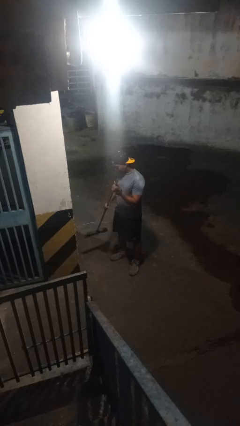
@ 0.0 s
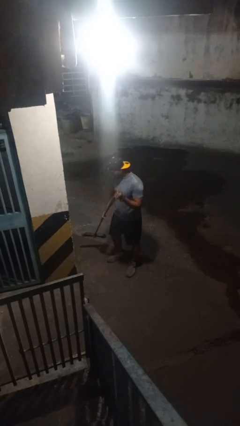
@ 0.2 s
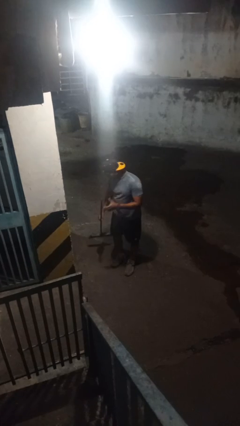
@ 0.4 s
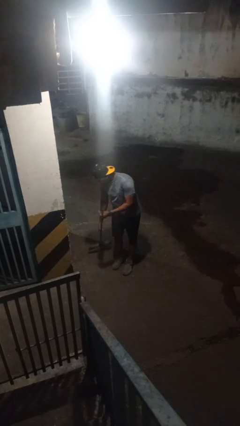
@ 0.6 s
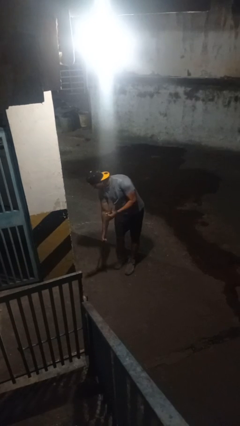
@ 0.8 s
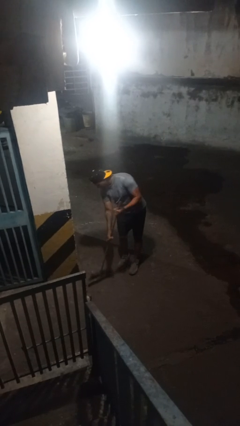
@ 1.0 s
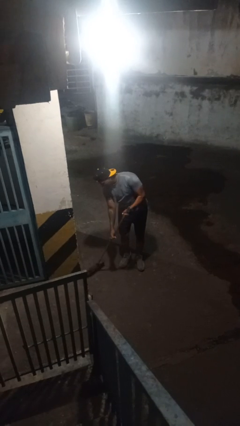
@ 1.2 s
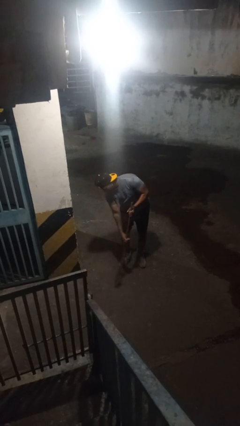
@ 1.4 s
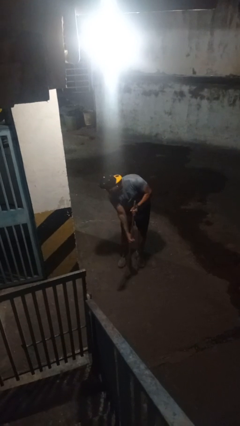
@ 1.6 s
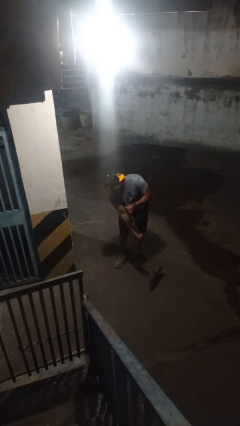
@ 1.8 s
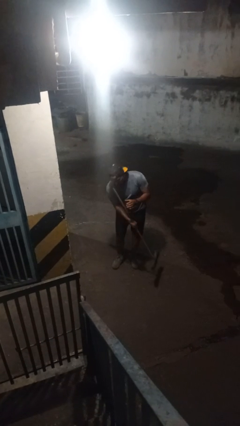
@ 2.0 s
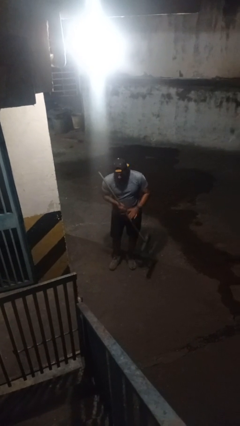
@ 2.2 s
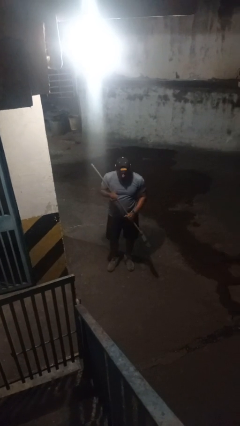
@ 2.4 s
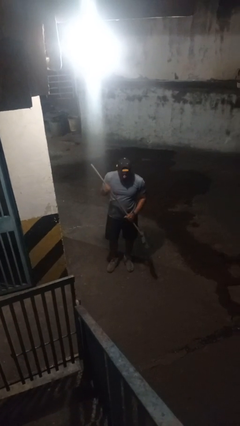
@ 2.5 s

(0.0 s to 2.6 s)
person sweeps floor

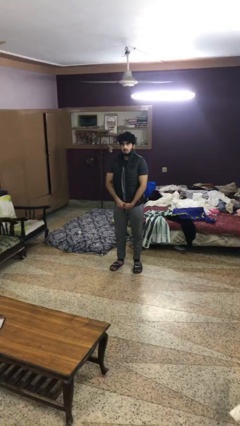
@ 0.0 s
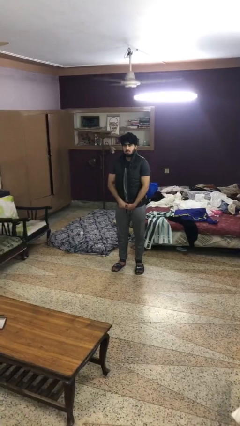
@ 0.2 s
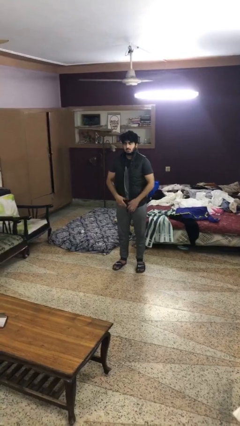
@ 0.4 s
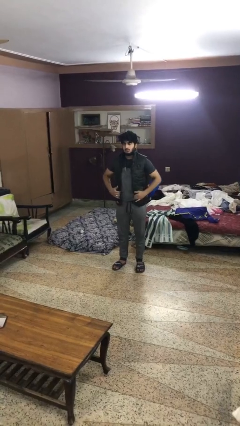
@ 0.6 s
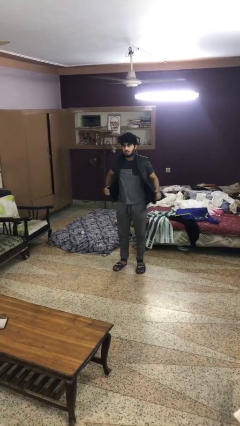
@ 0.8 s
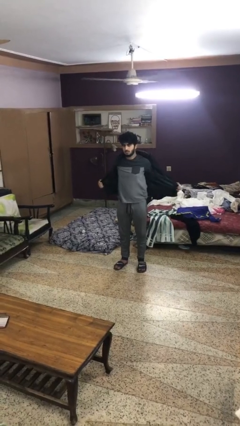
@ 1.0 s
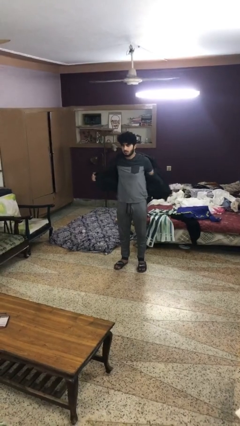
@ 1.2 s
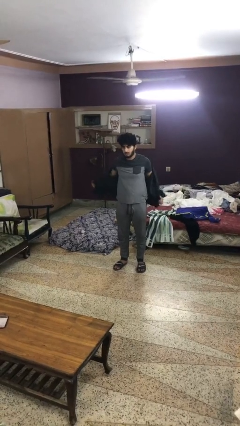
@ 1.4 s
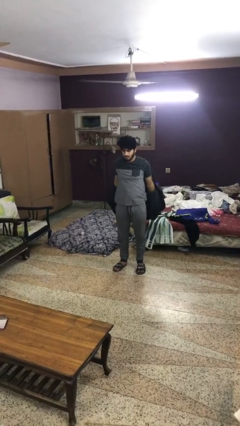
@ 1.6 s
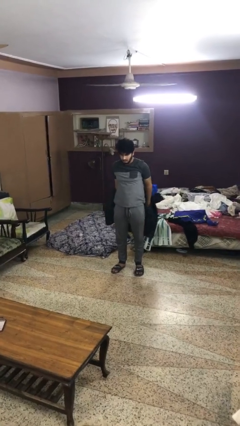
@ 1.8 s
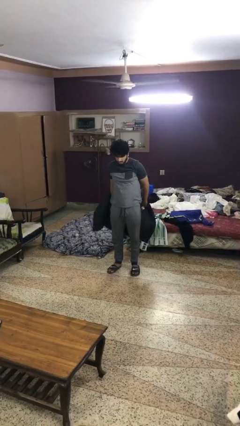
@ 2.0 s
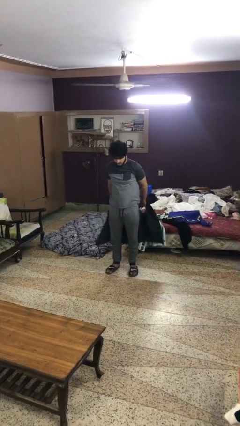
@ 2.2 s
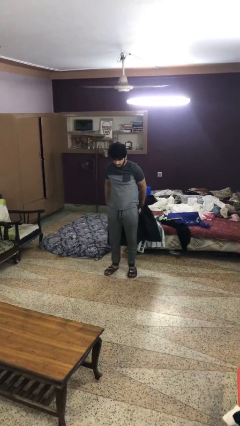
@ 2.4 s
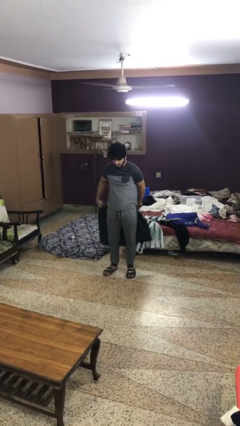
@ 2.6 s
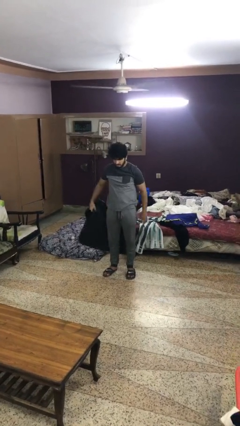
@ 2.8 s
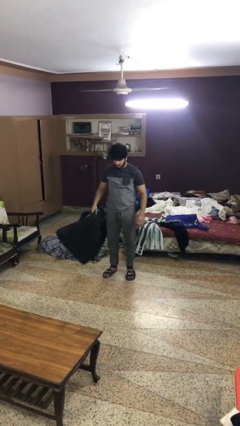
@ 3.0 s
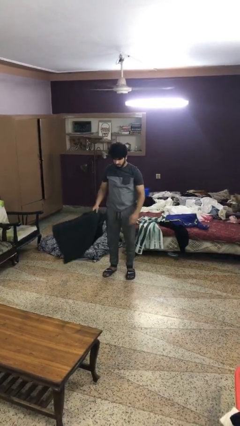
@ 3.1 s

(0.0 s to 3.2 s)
person takes off jacket

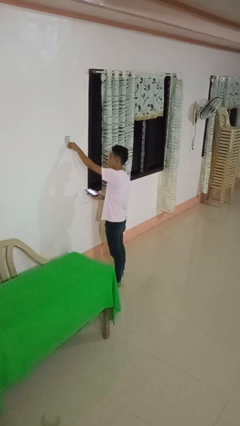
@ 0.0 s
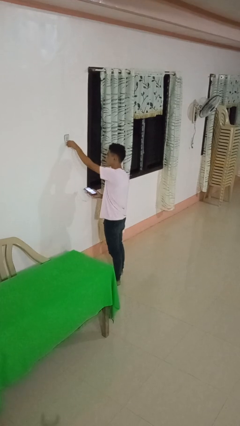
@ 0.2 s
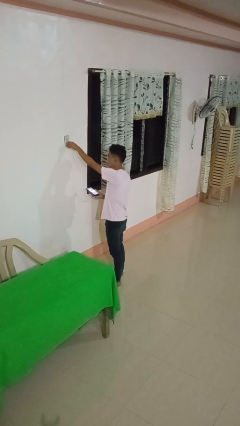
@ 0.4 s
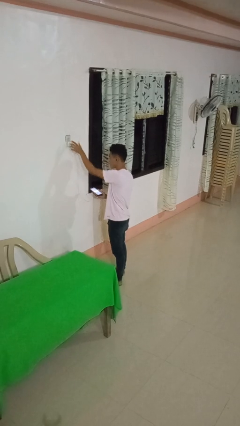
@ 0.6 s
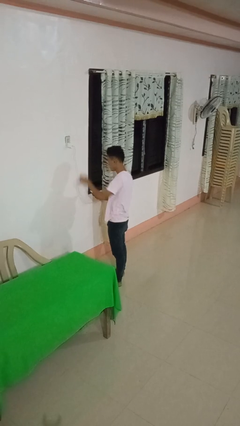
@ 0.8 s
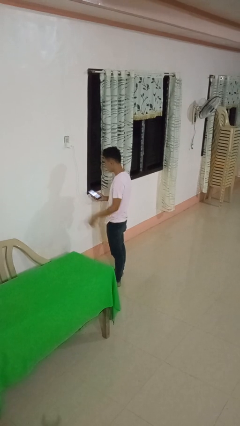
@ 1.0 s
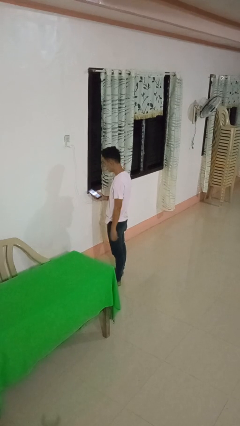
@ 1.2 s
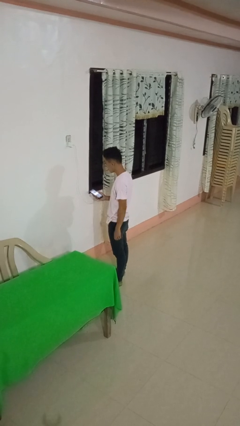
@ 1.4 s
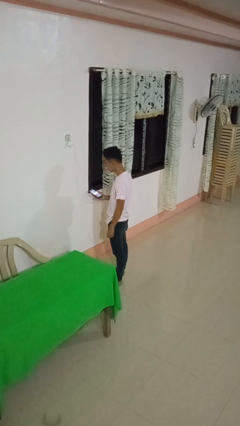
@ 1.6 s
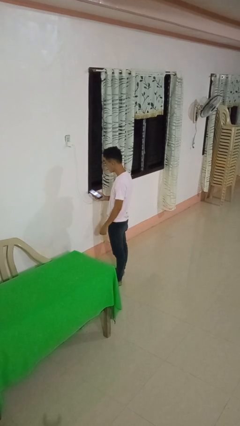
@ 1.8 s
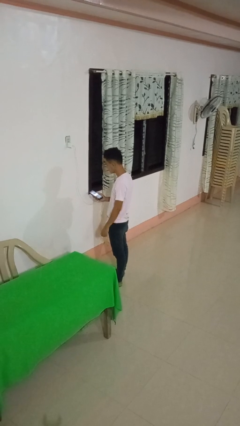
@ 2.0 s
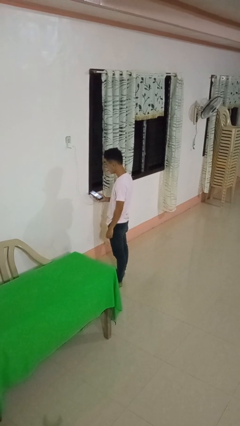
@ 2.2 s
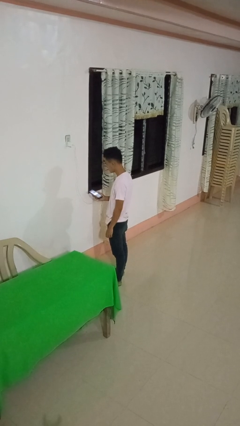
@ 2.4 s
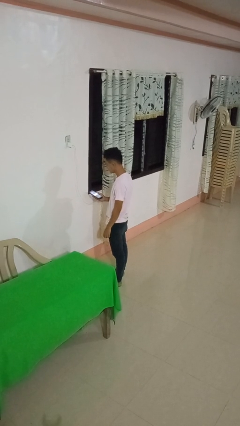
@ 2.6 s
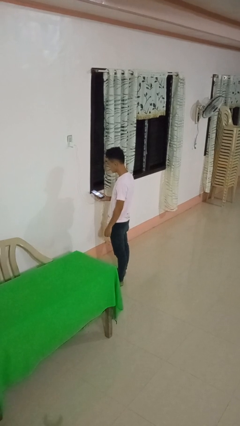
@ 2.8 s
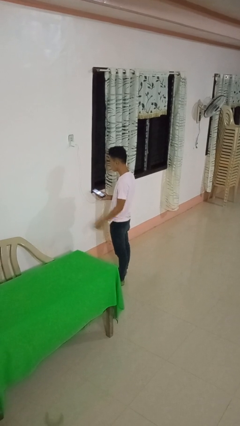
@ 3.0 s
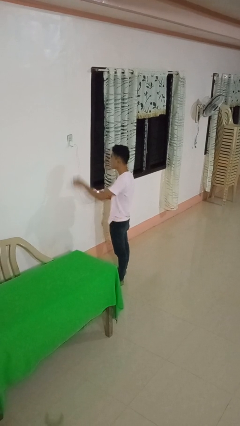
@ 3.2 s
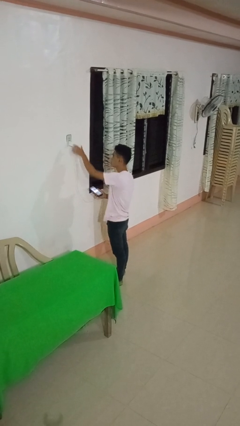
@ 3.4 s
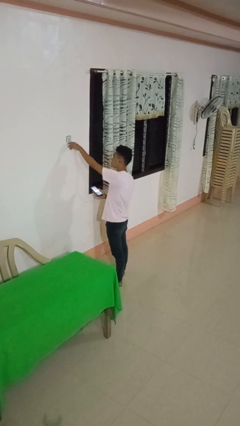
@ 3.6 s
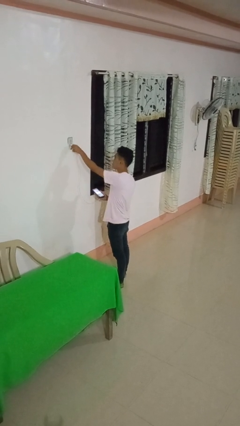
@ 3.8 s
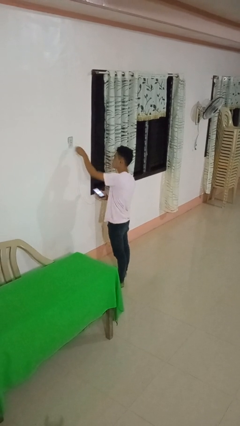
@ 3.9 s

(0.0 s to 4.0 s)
person plugs into electrical socket

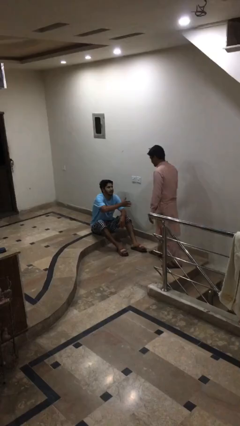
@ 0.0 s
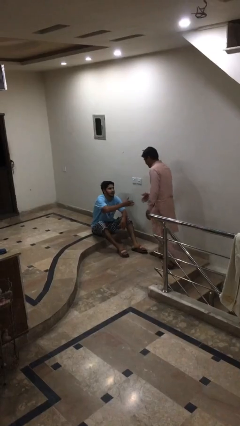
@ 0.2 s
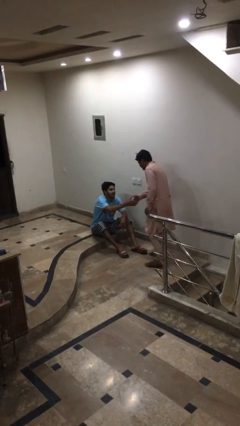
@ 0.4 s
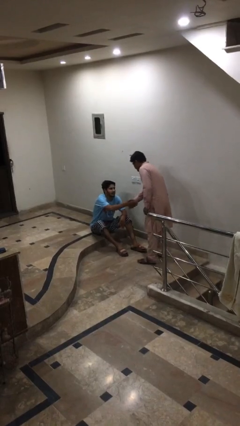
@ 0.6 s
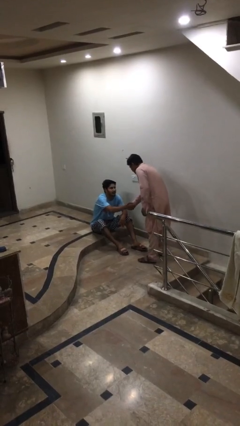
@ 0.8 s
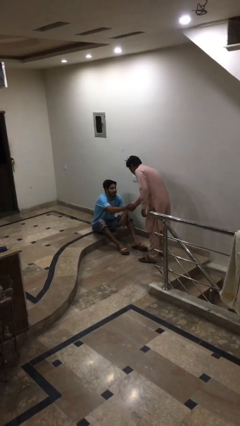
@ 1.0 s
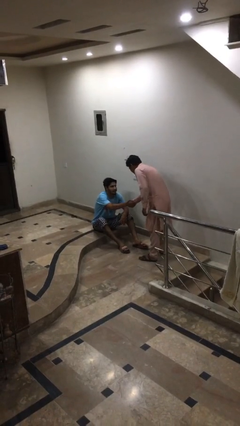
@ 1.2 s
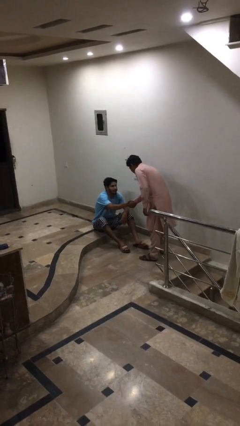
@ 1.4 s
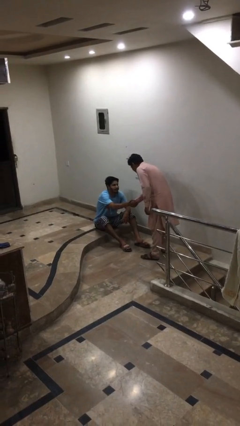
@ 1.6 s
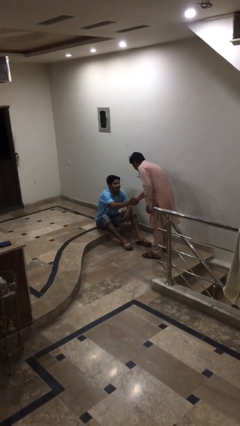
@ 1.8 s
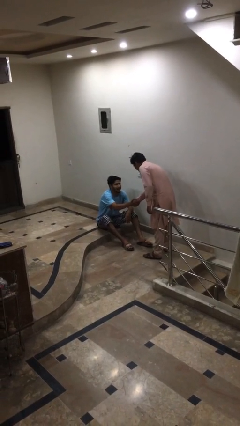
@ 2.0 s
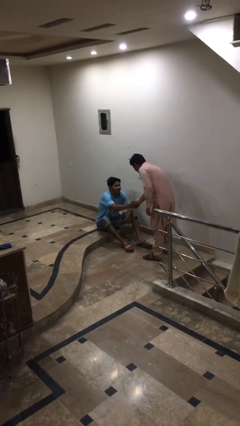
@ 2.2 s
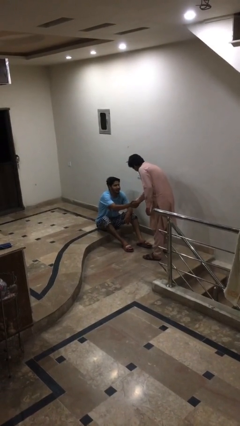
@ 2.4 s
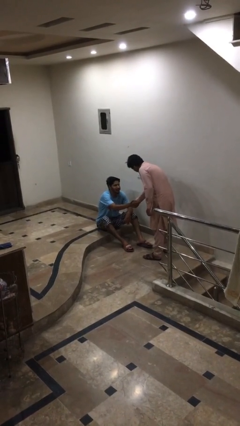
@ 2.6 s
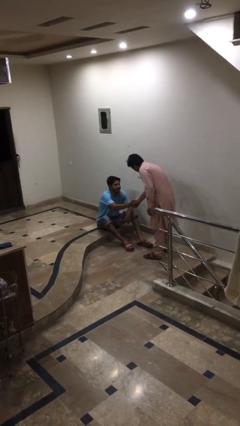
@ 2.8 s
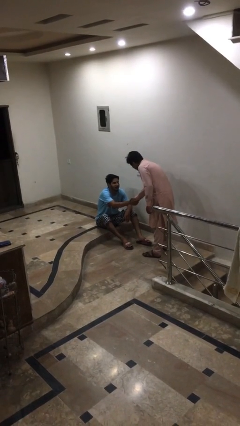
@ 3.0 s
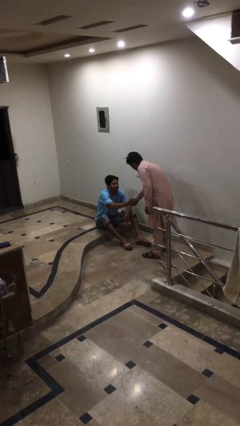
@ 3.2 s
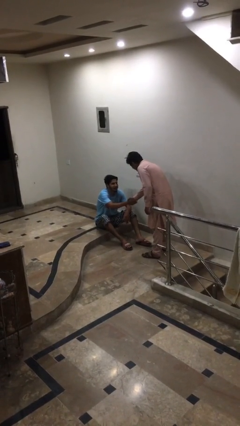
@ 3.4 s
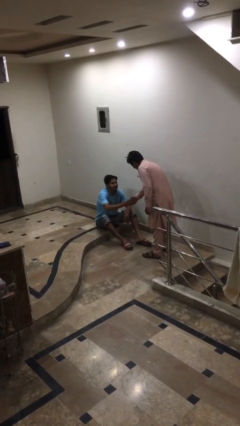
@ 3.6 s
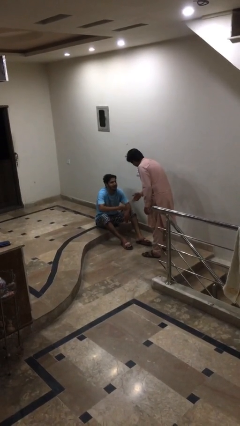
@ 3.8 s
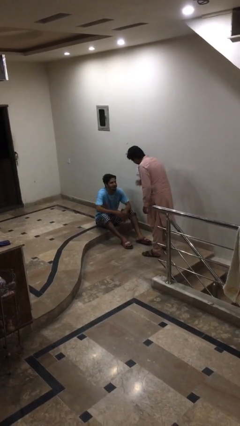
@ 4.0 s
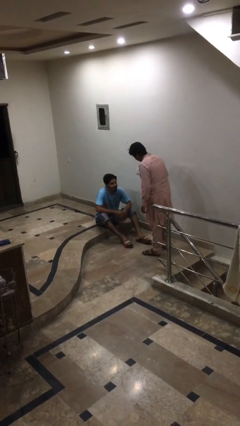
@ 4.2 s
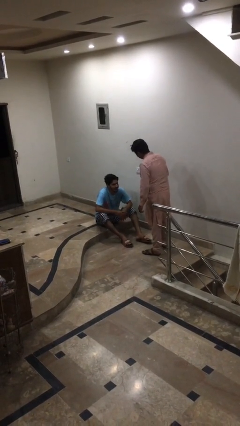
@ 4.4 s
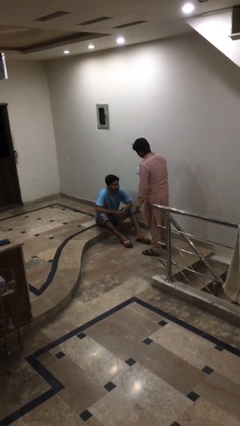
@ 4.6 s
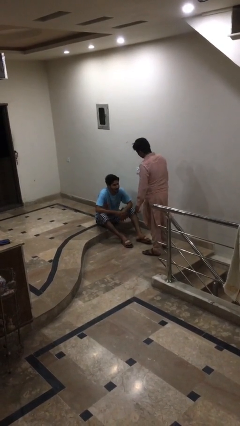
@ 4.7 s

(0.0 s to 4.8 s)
person shakes hand

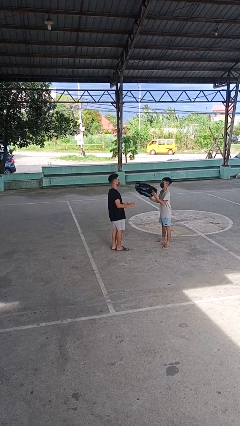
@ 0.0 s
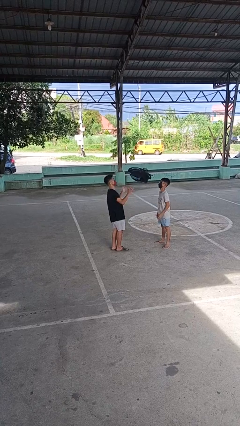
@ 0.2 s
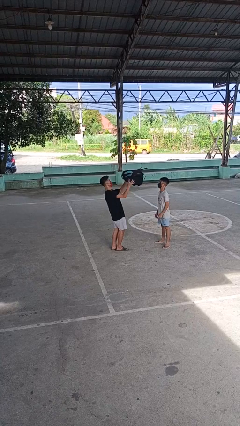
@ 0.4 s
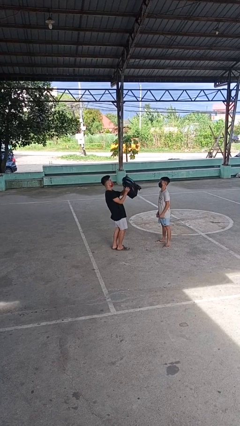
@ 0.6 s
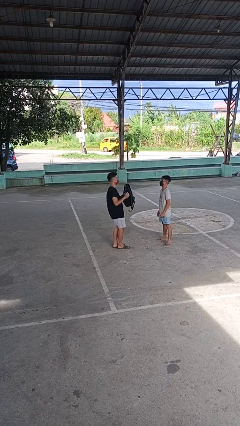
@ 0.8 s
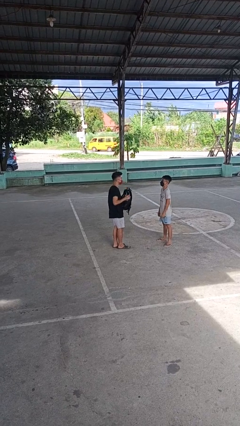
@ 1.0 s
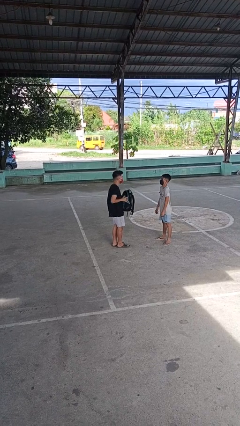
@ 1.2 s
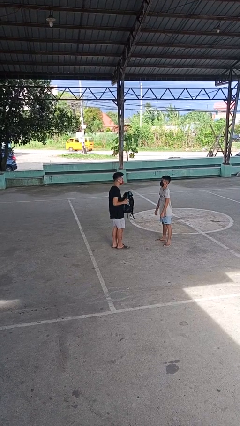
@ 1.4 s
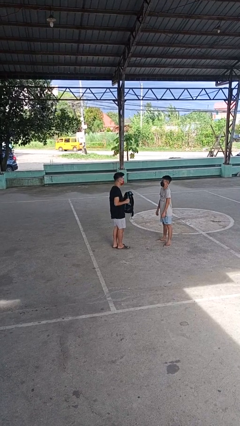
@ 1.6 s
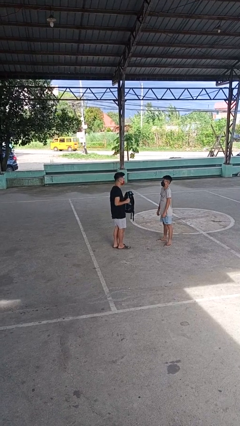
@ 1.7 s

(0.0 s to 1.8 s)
person catches object from person

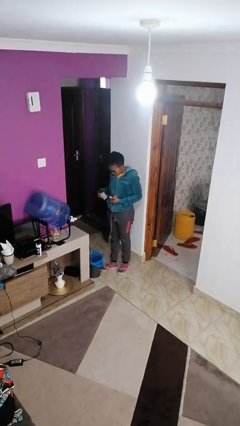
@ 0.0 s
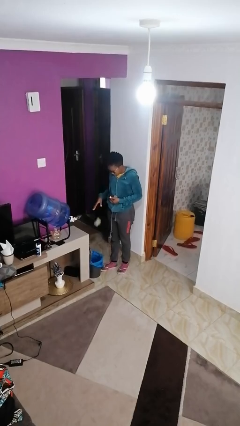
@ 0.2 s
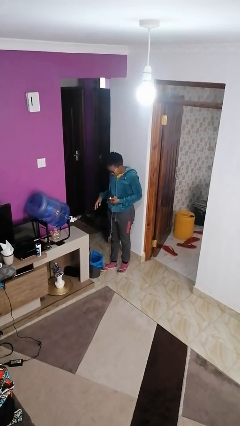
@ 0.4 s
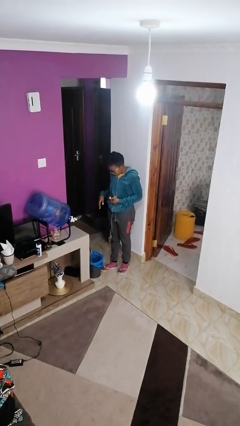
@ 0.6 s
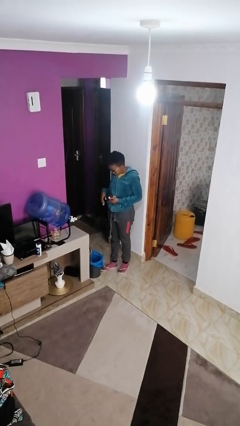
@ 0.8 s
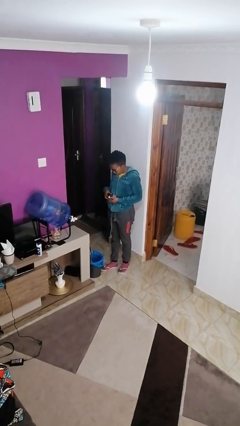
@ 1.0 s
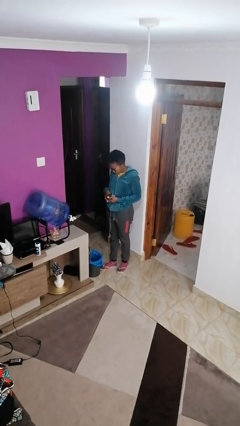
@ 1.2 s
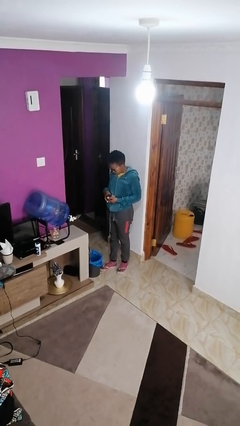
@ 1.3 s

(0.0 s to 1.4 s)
person discards trash
